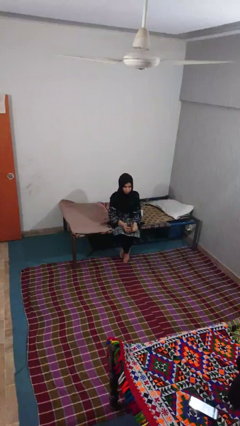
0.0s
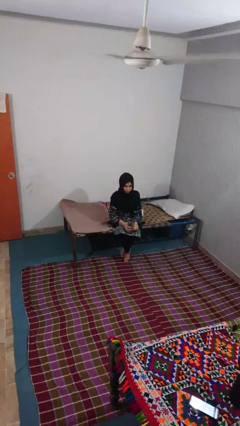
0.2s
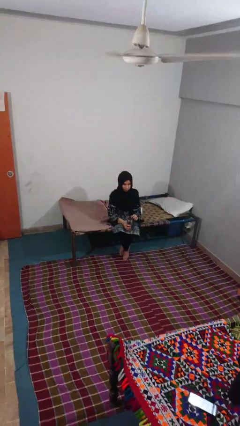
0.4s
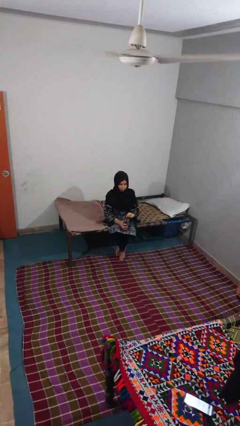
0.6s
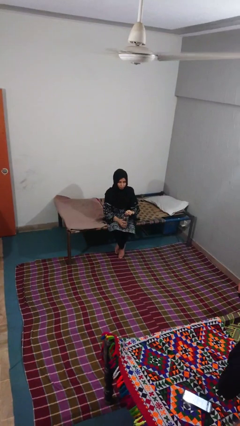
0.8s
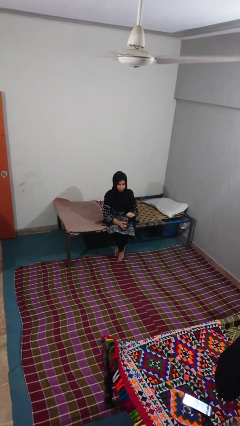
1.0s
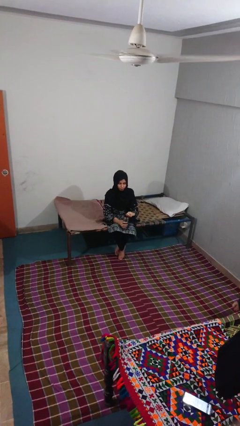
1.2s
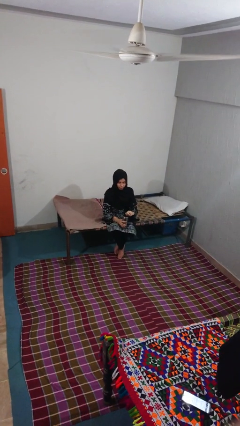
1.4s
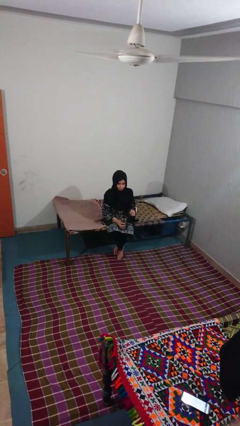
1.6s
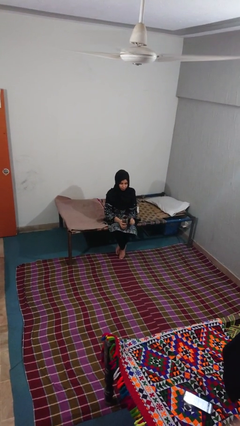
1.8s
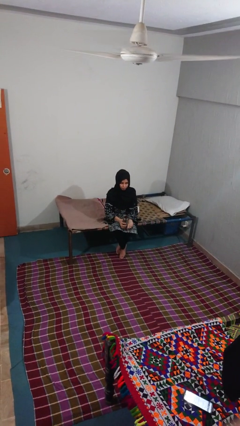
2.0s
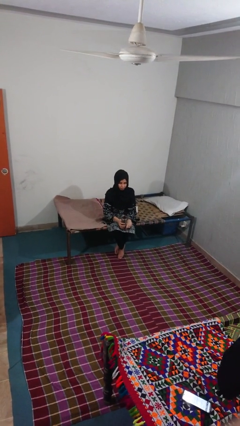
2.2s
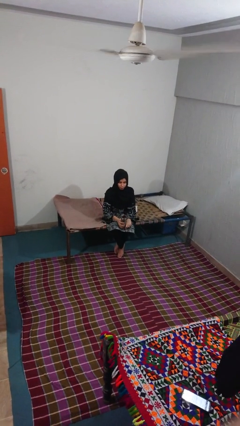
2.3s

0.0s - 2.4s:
person opens beverage can

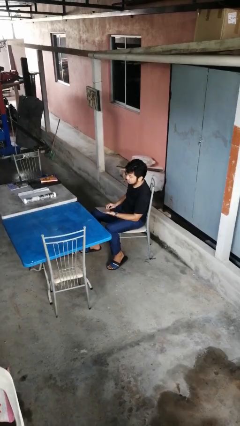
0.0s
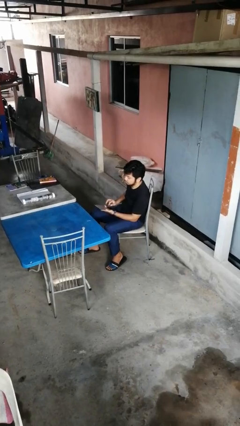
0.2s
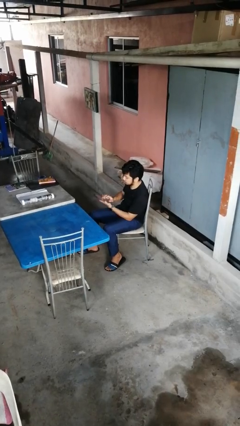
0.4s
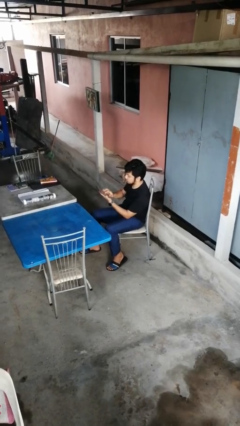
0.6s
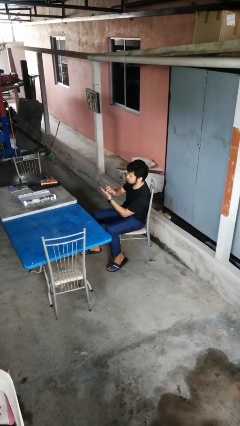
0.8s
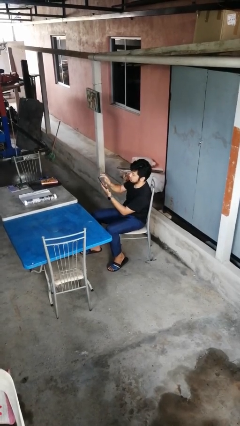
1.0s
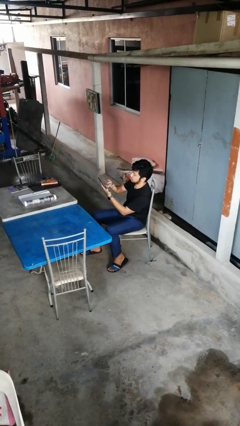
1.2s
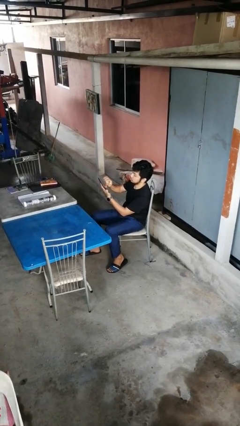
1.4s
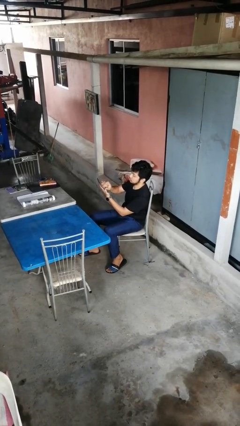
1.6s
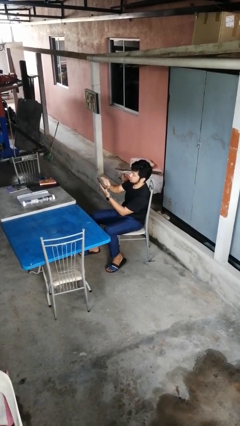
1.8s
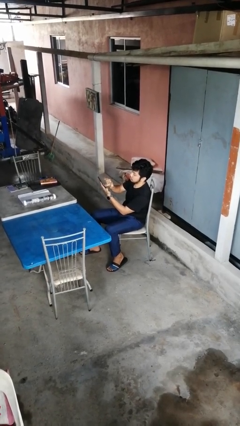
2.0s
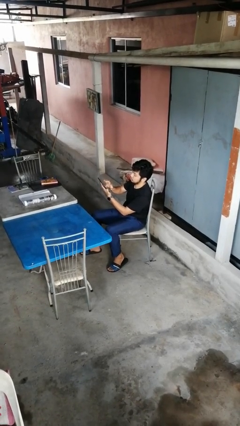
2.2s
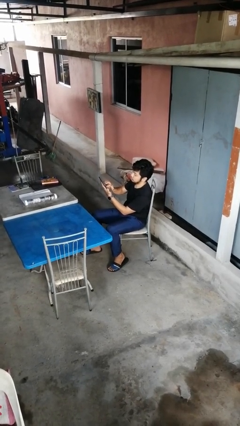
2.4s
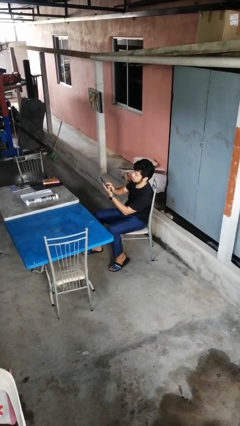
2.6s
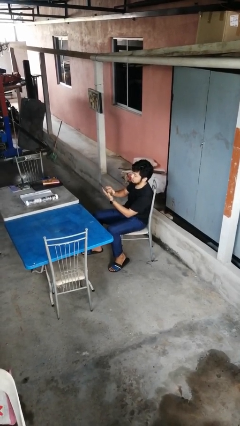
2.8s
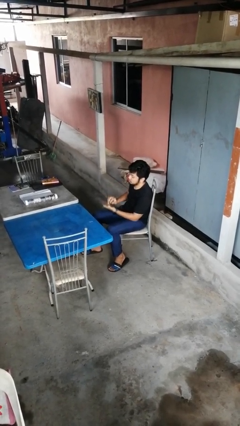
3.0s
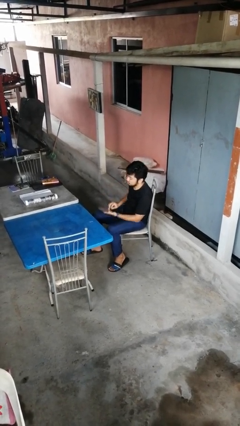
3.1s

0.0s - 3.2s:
person interacts with tablet

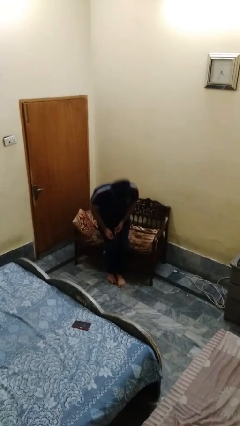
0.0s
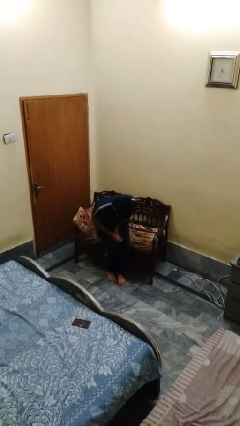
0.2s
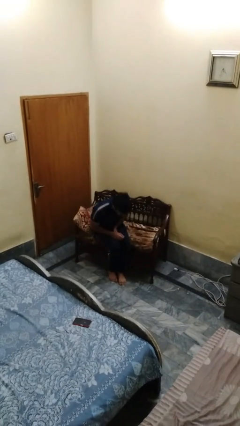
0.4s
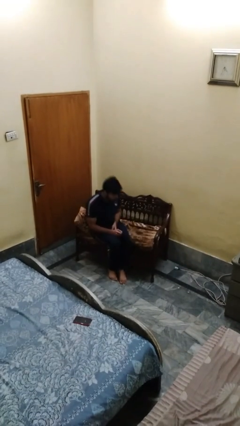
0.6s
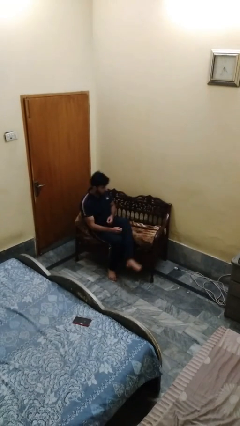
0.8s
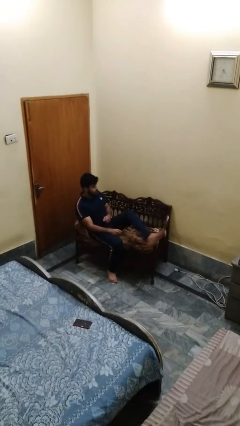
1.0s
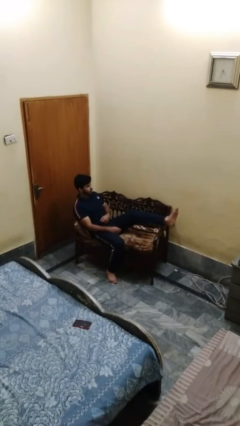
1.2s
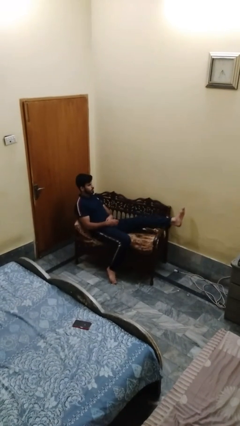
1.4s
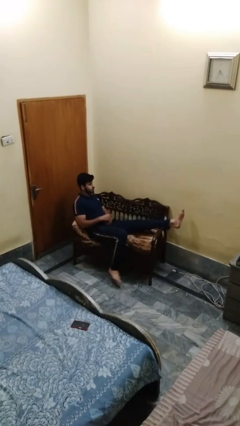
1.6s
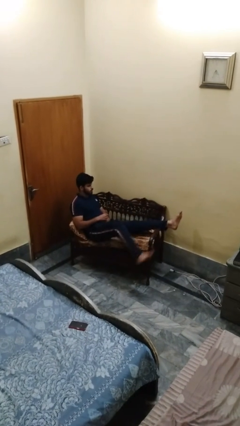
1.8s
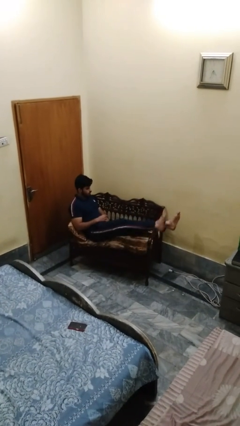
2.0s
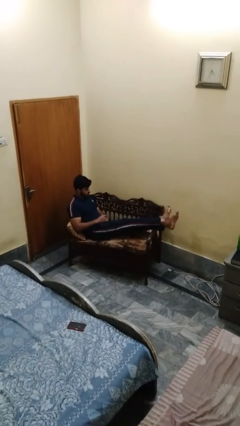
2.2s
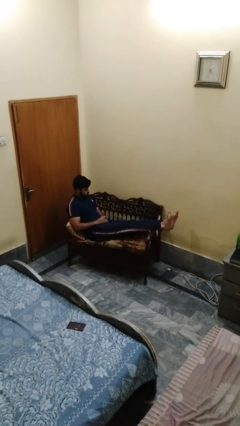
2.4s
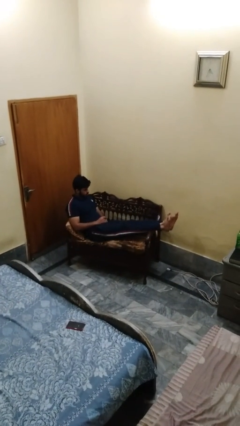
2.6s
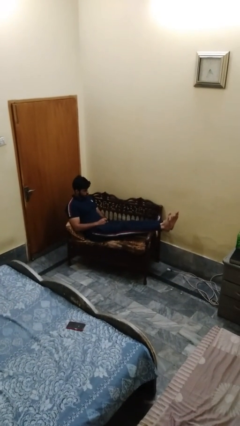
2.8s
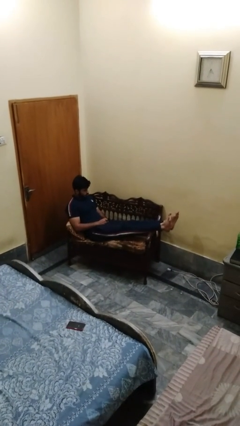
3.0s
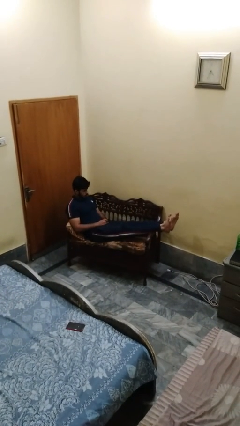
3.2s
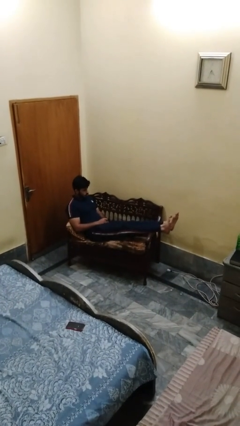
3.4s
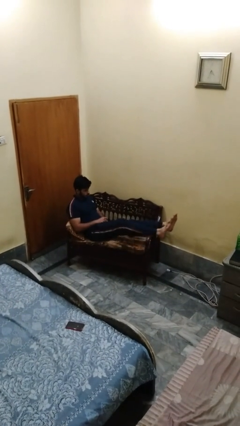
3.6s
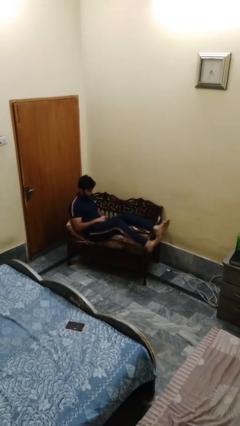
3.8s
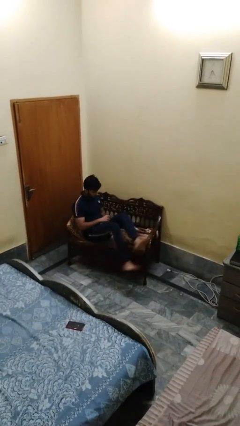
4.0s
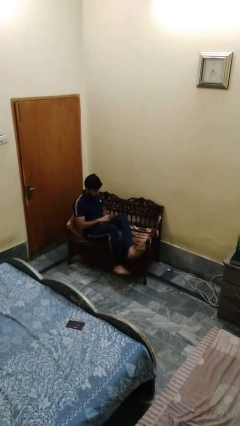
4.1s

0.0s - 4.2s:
person lies down on couch

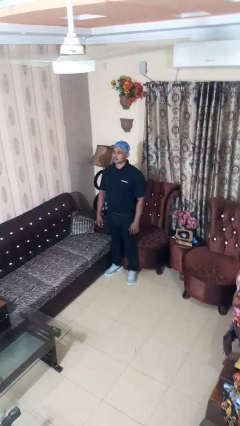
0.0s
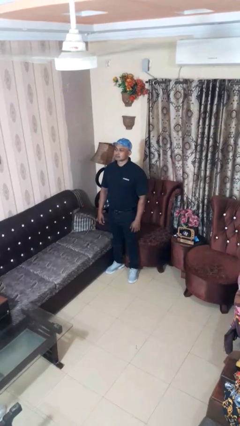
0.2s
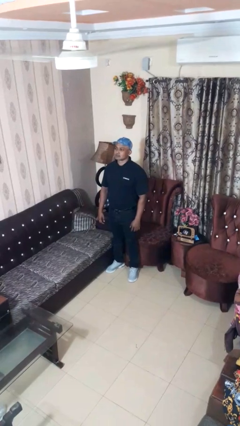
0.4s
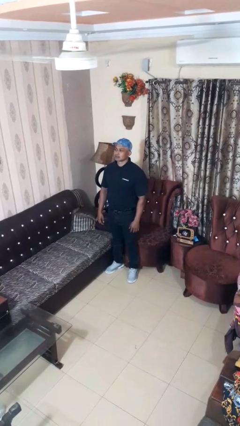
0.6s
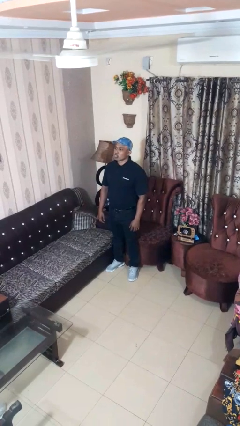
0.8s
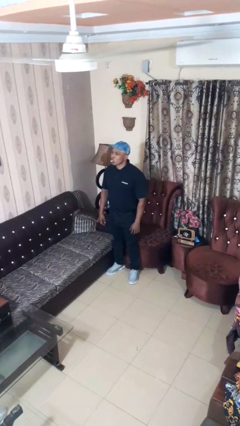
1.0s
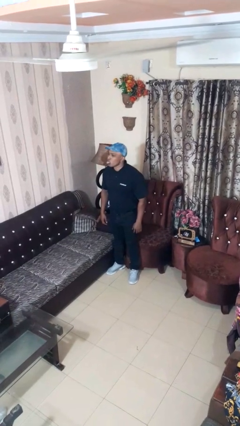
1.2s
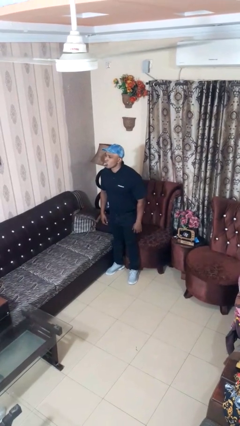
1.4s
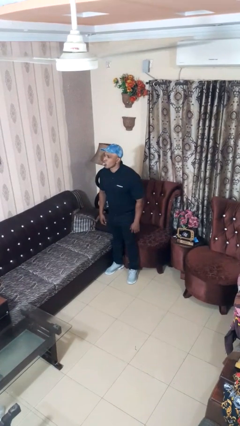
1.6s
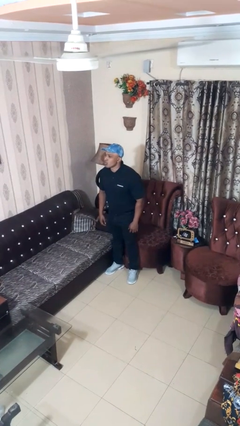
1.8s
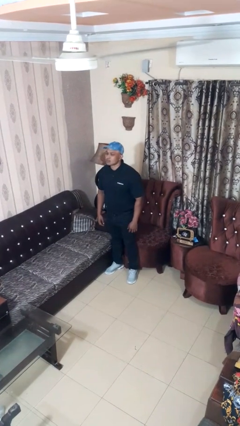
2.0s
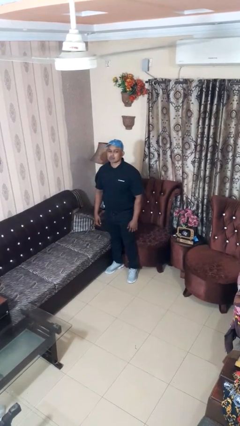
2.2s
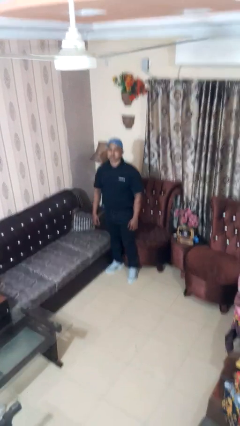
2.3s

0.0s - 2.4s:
person sticks out tongue

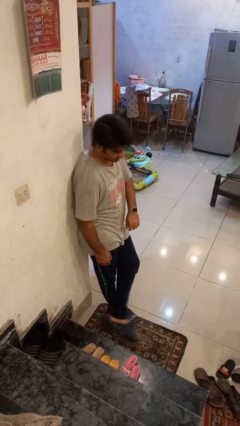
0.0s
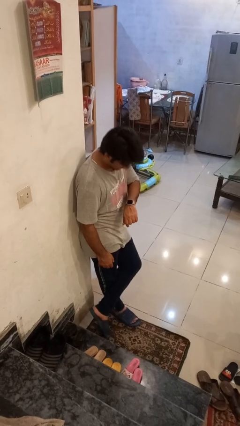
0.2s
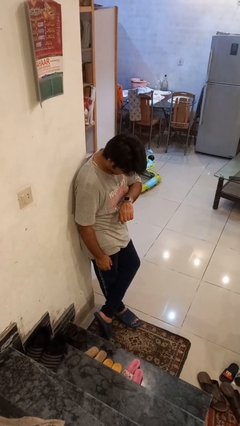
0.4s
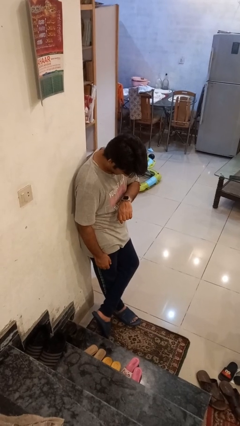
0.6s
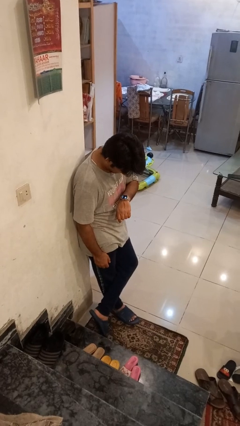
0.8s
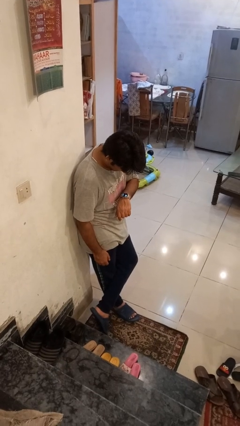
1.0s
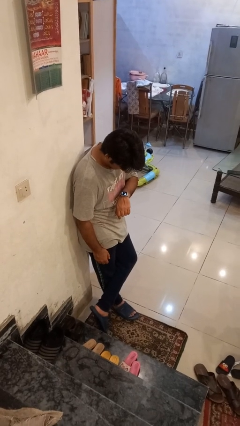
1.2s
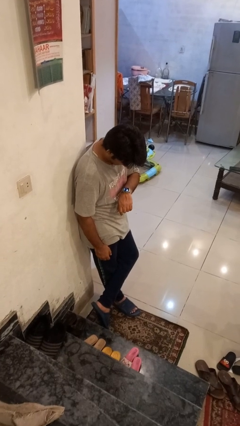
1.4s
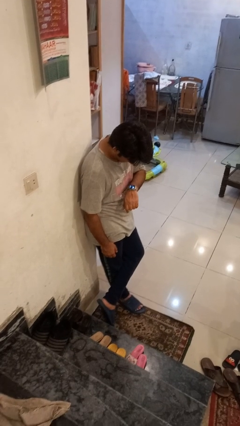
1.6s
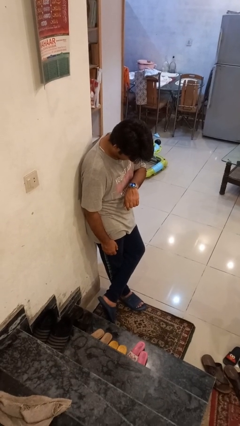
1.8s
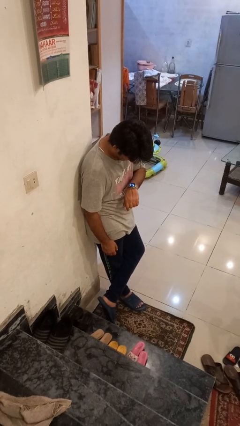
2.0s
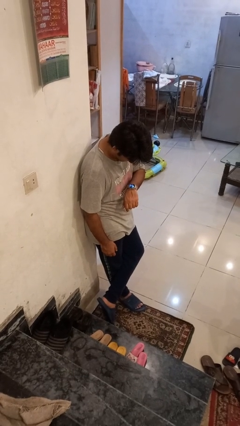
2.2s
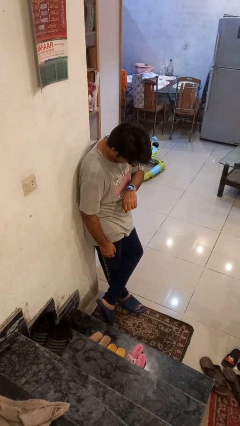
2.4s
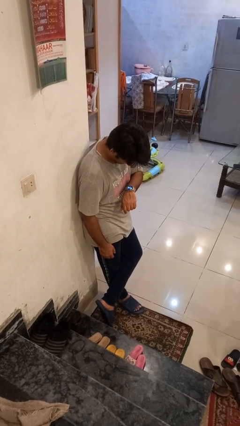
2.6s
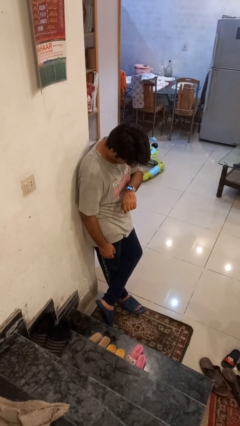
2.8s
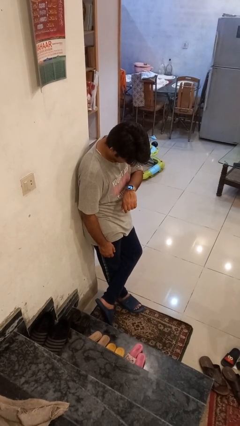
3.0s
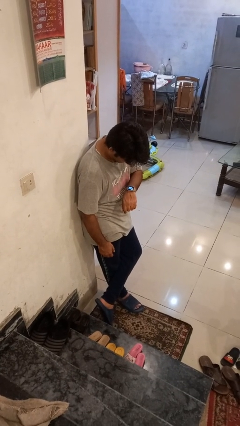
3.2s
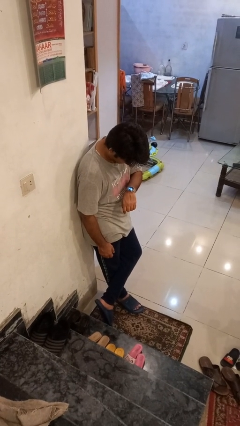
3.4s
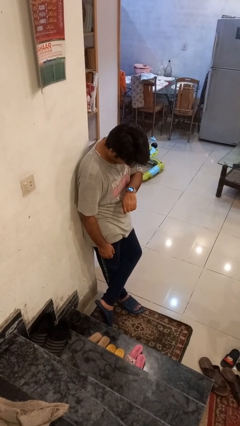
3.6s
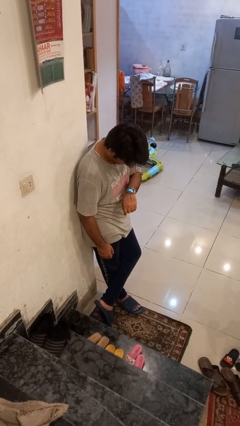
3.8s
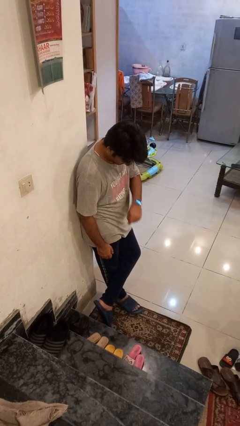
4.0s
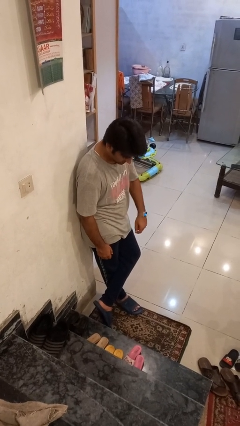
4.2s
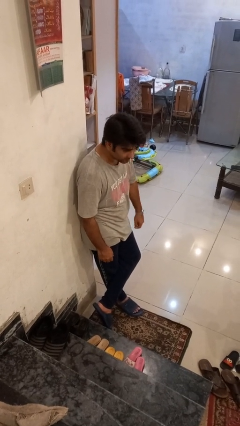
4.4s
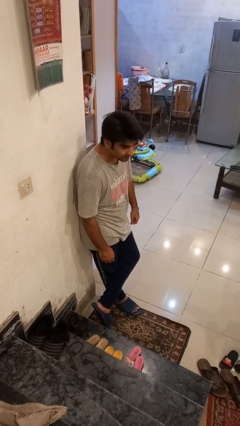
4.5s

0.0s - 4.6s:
person looks at wristwatch

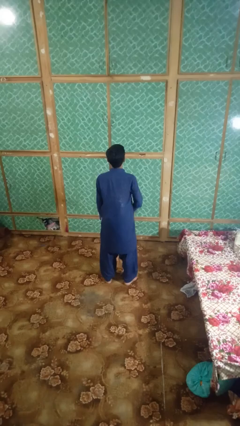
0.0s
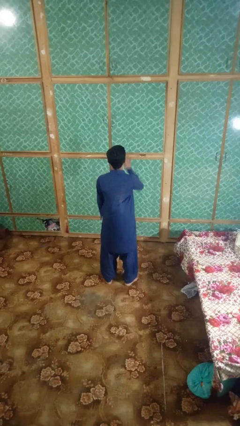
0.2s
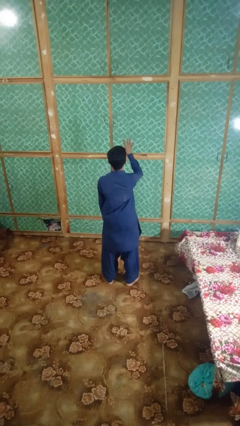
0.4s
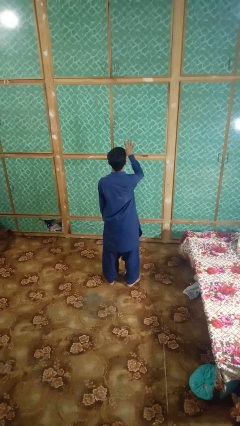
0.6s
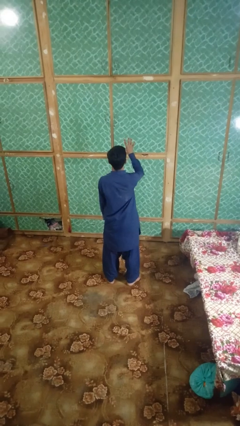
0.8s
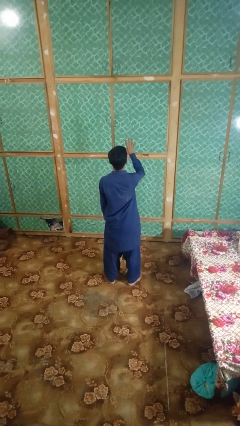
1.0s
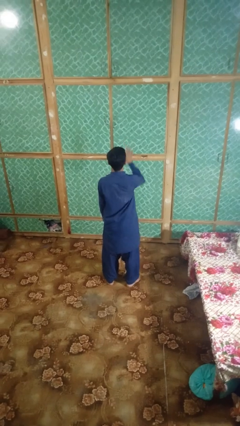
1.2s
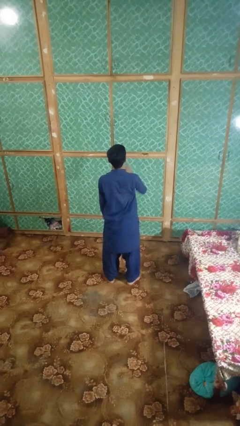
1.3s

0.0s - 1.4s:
person gestures number four
